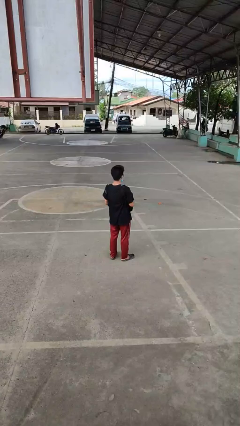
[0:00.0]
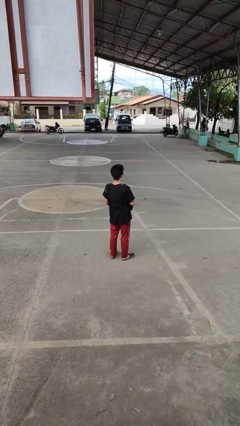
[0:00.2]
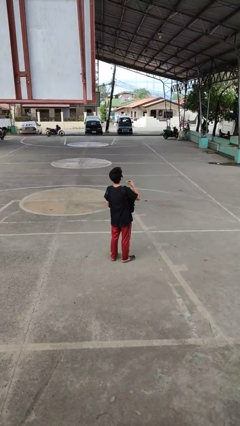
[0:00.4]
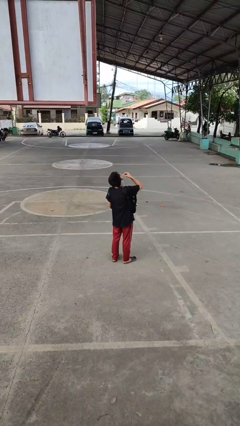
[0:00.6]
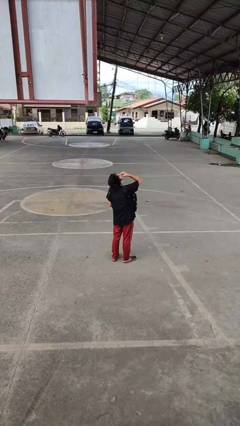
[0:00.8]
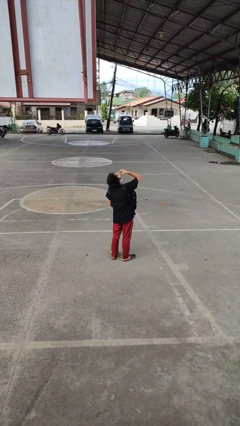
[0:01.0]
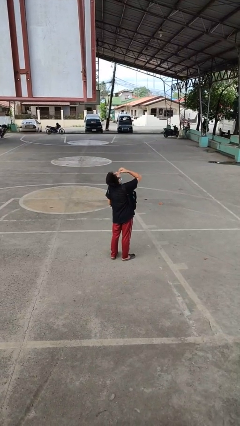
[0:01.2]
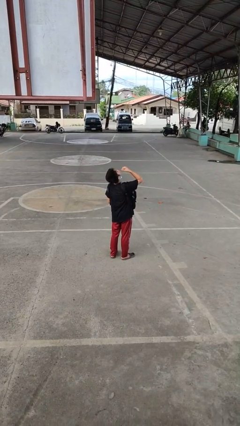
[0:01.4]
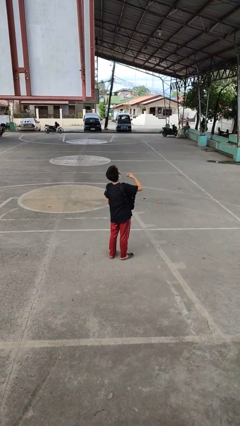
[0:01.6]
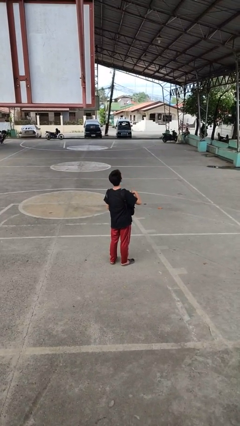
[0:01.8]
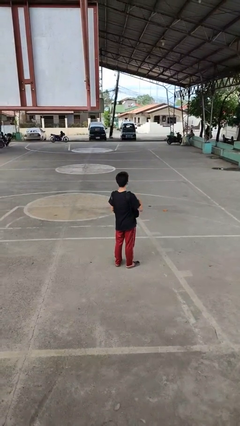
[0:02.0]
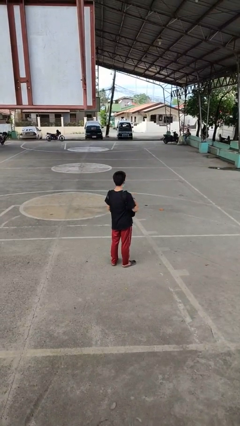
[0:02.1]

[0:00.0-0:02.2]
person eats snack from bag

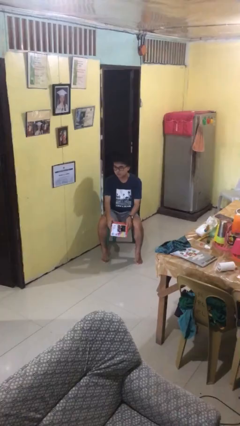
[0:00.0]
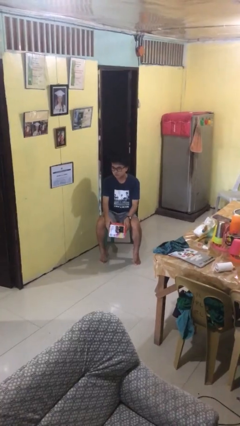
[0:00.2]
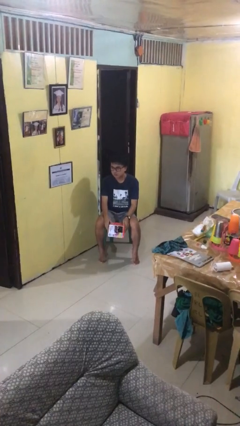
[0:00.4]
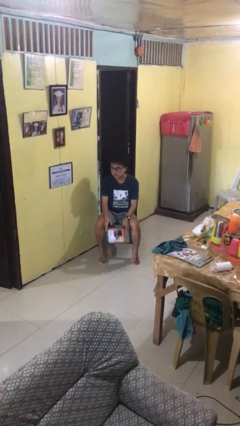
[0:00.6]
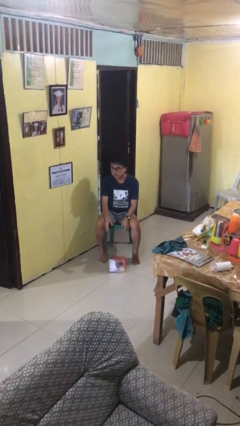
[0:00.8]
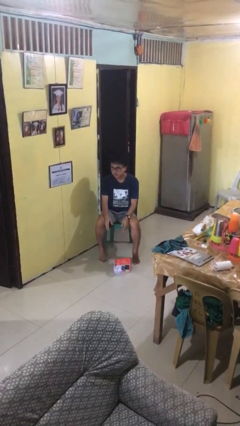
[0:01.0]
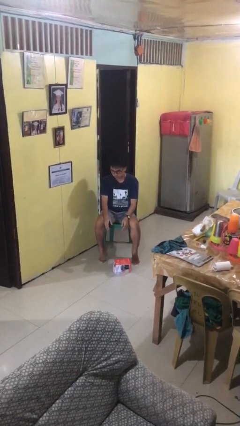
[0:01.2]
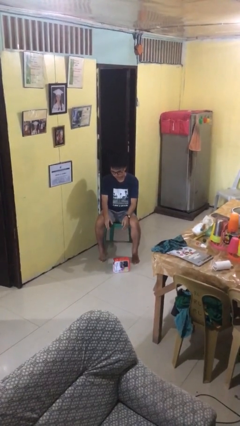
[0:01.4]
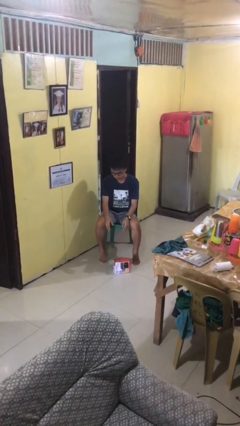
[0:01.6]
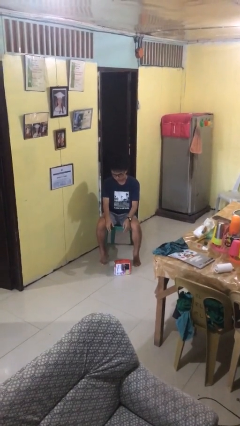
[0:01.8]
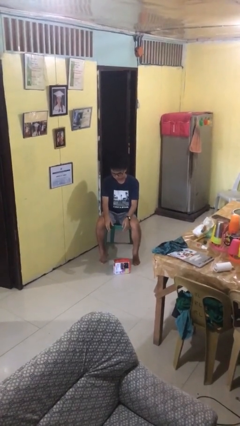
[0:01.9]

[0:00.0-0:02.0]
person drops object

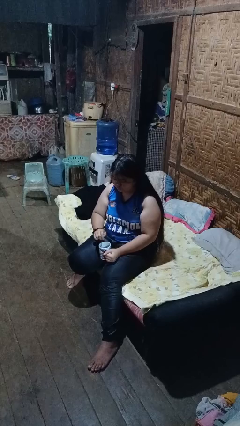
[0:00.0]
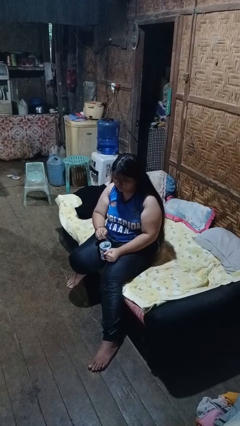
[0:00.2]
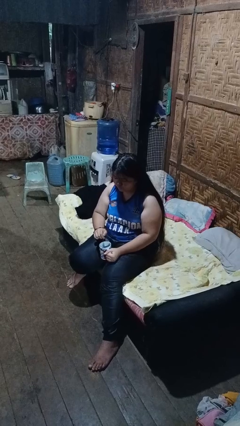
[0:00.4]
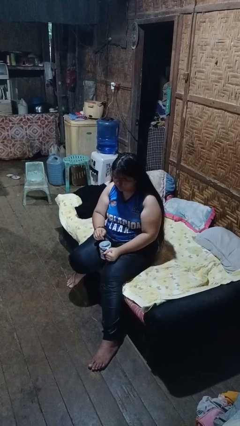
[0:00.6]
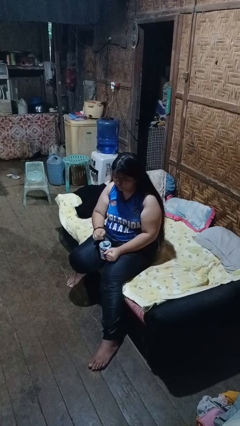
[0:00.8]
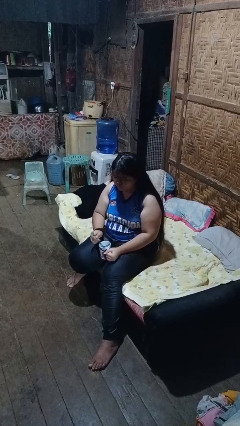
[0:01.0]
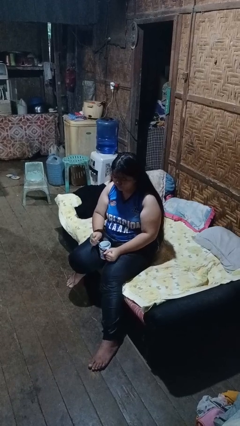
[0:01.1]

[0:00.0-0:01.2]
person stirs mug

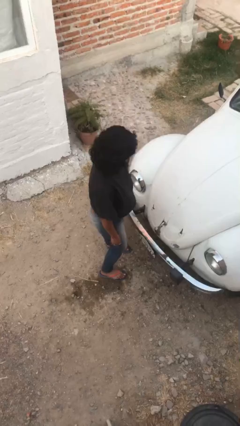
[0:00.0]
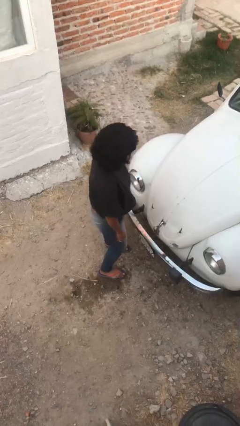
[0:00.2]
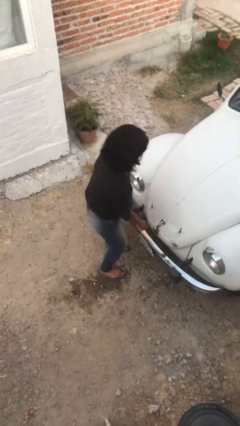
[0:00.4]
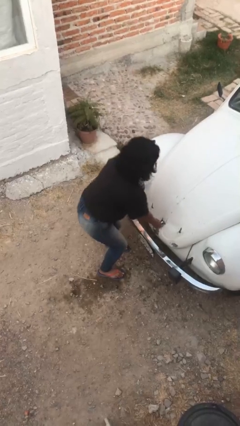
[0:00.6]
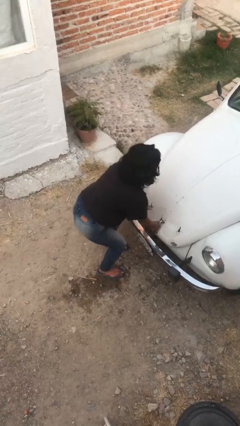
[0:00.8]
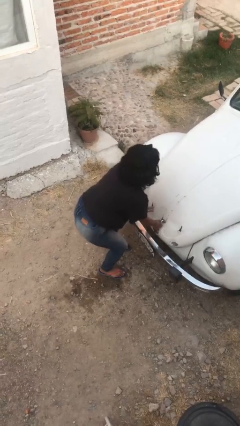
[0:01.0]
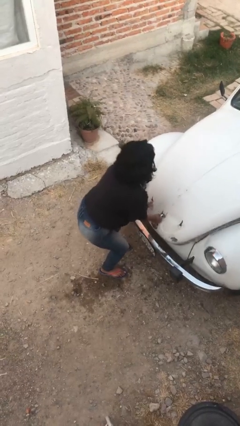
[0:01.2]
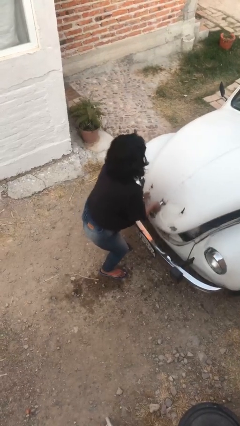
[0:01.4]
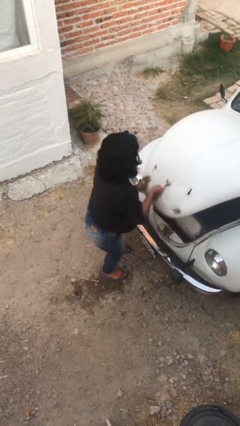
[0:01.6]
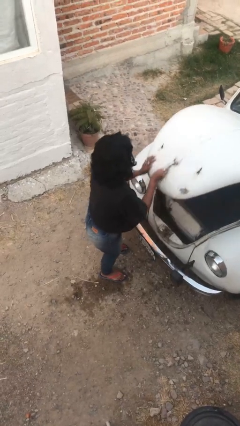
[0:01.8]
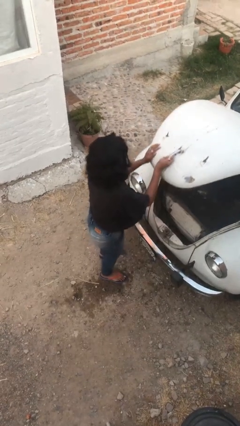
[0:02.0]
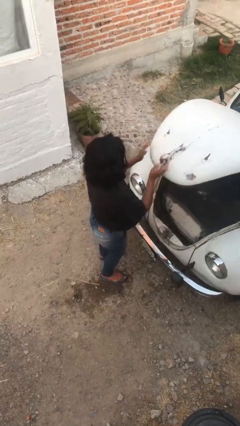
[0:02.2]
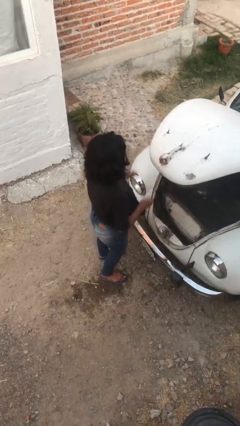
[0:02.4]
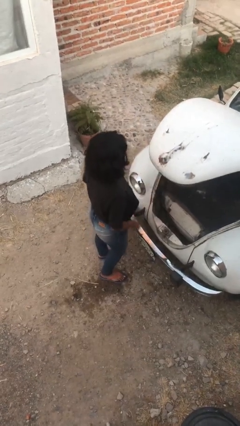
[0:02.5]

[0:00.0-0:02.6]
person opens car trunk

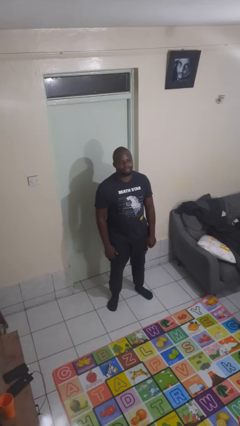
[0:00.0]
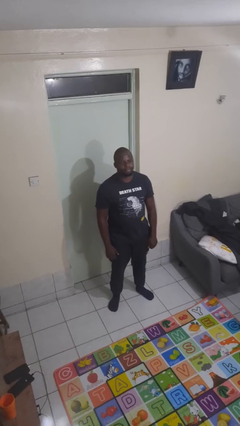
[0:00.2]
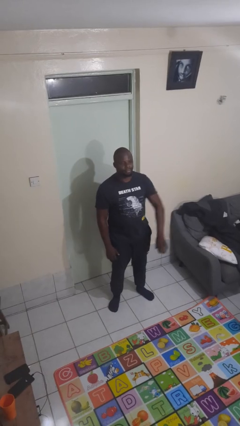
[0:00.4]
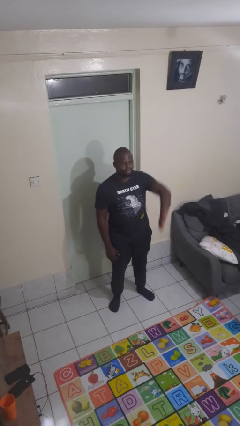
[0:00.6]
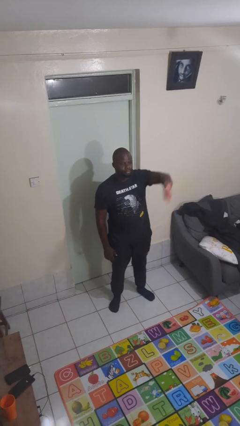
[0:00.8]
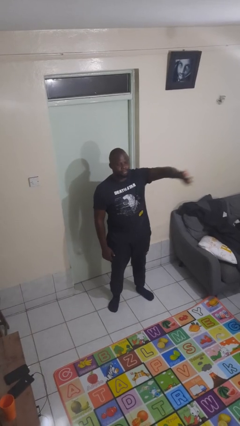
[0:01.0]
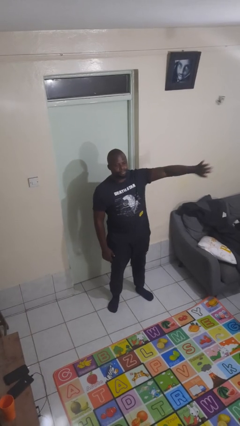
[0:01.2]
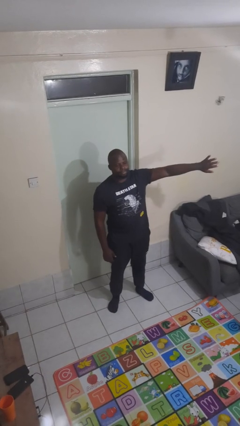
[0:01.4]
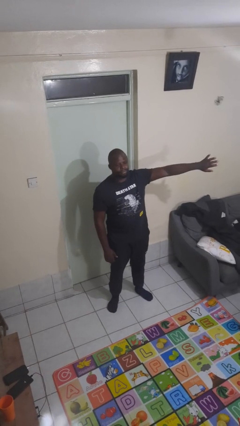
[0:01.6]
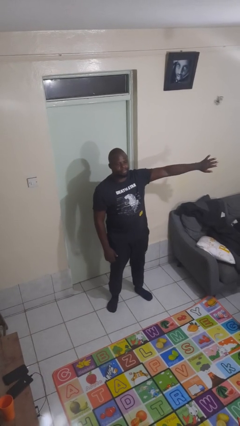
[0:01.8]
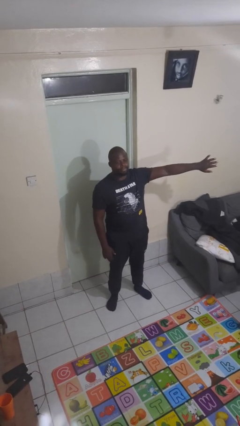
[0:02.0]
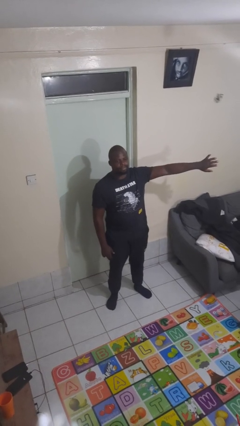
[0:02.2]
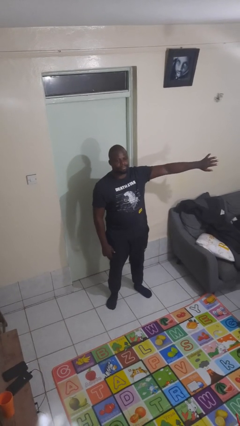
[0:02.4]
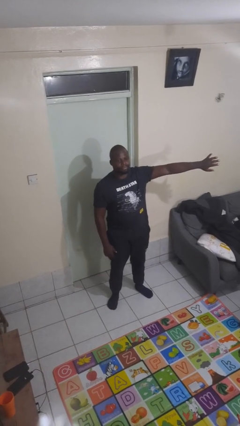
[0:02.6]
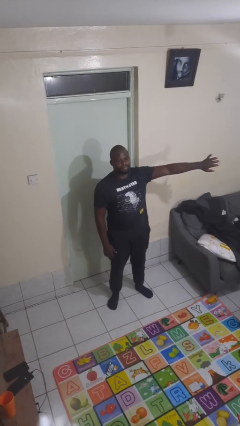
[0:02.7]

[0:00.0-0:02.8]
person gestures swipe left

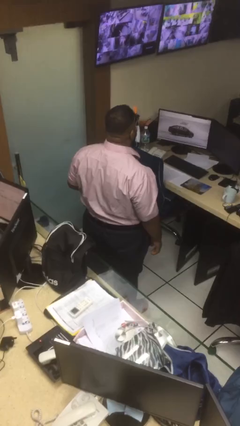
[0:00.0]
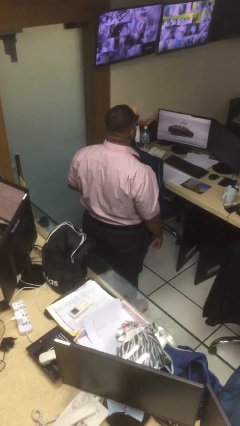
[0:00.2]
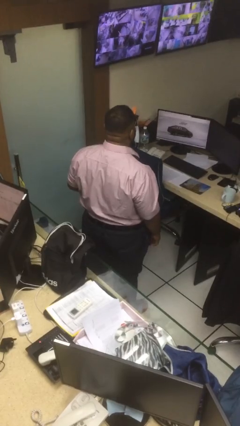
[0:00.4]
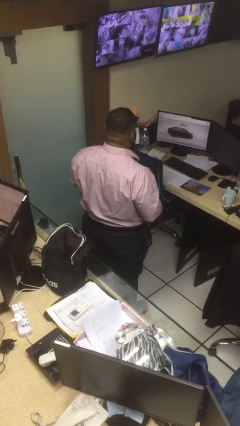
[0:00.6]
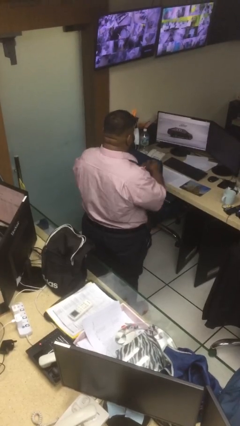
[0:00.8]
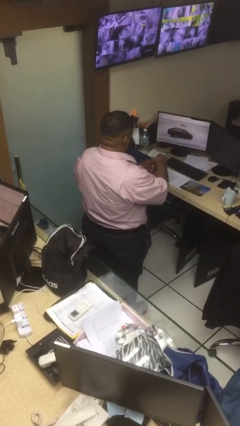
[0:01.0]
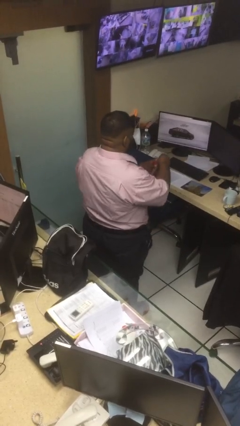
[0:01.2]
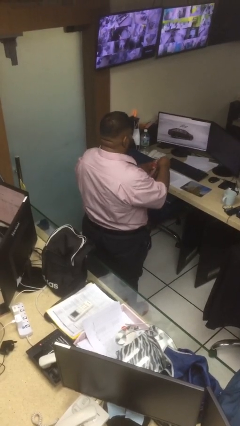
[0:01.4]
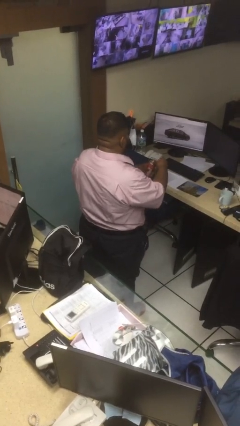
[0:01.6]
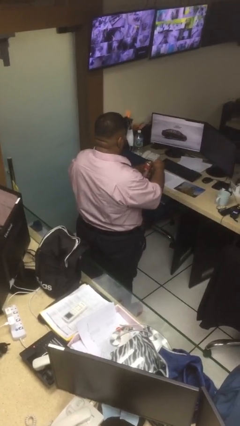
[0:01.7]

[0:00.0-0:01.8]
person opens beverage can

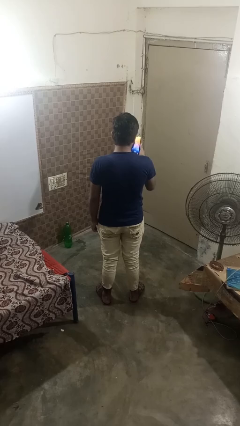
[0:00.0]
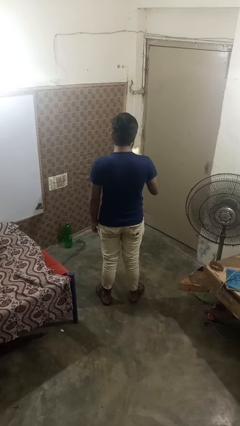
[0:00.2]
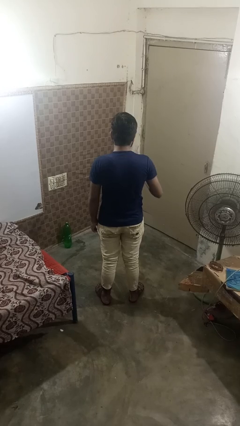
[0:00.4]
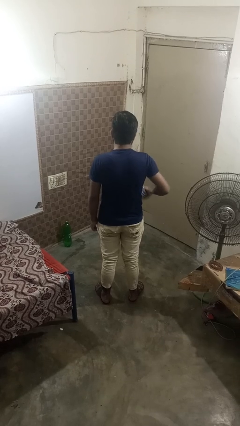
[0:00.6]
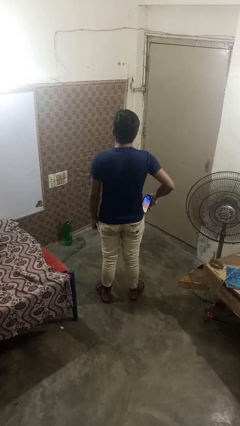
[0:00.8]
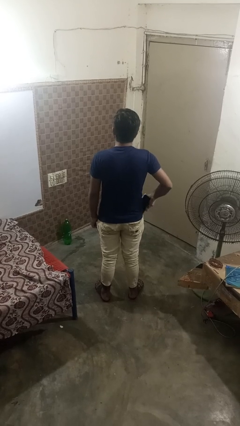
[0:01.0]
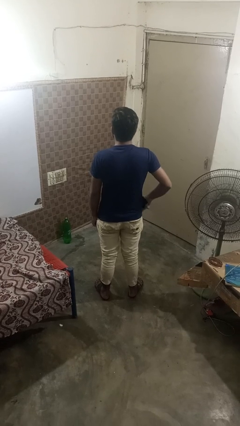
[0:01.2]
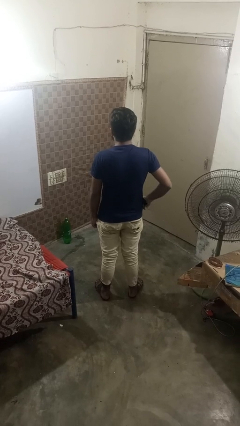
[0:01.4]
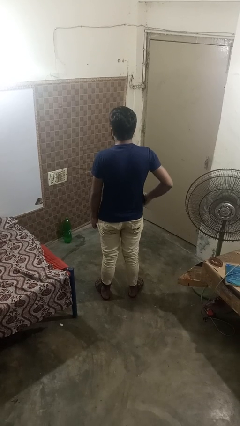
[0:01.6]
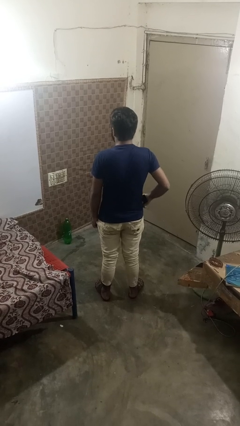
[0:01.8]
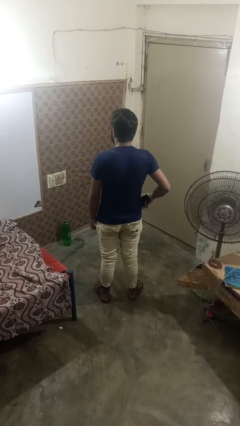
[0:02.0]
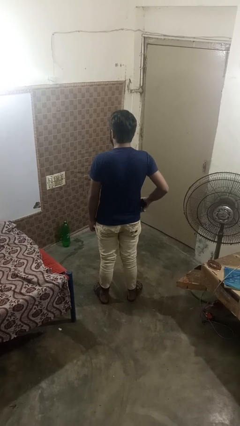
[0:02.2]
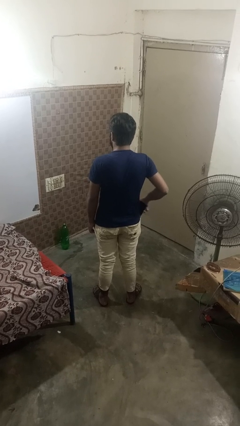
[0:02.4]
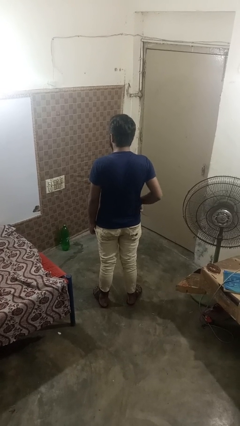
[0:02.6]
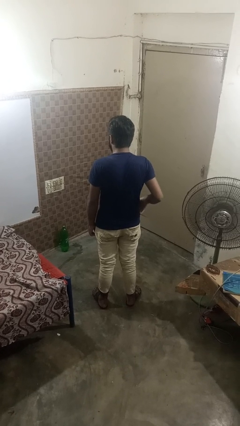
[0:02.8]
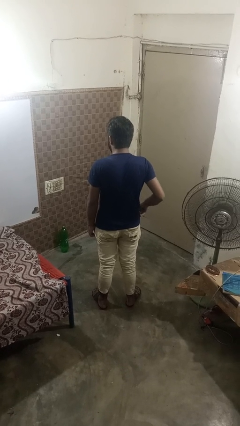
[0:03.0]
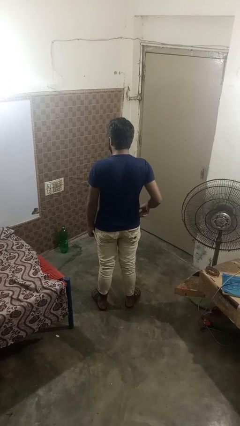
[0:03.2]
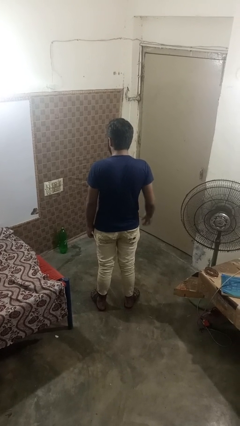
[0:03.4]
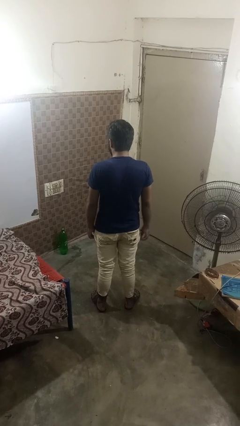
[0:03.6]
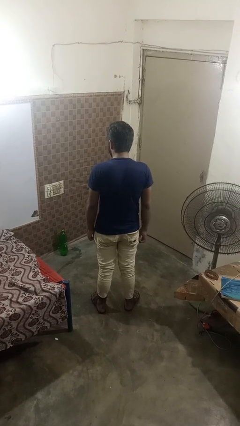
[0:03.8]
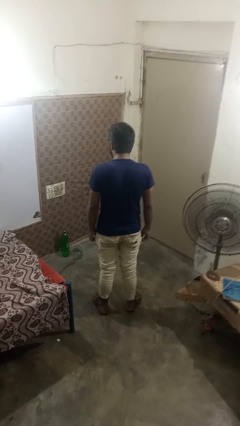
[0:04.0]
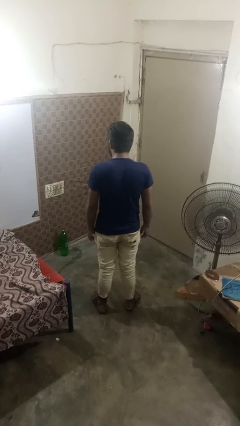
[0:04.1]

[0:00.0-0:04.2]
person puts phone into pocket
